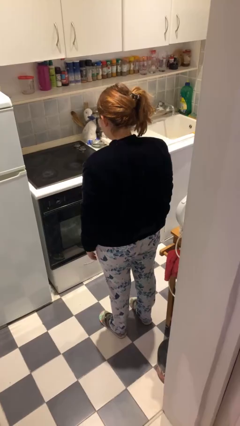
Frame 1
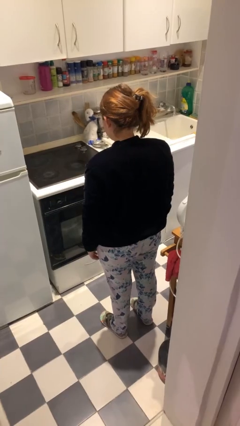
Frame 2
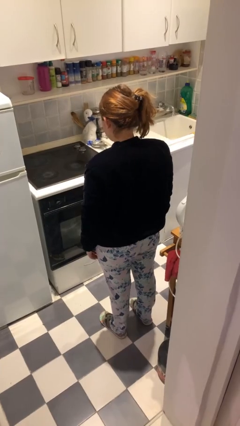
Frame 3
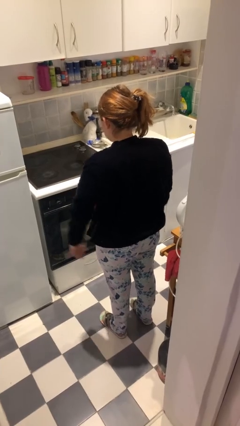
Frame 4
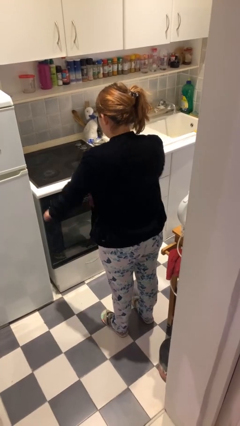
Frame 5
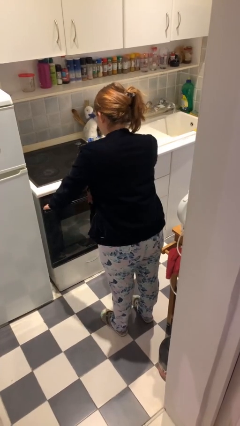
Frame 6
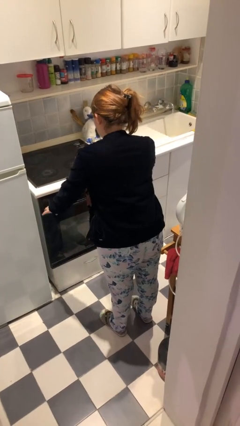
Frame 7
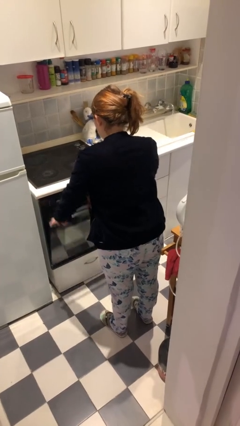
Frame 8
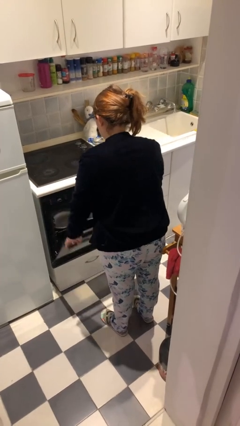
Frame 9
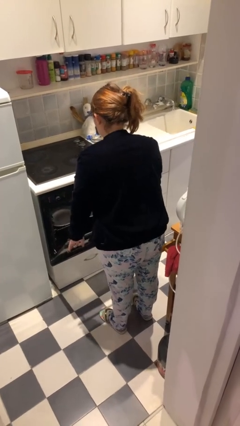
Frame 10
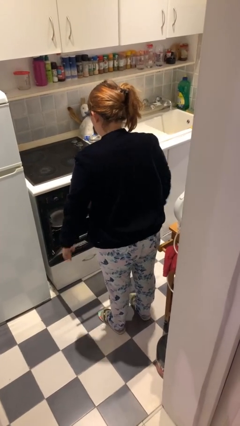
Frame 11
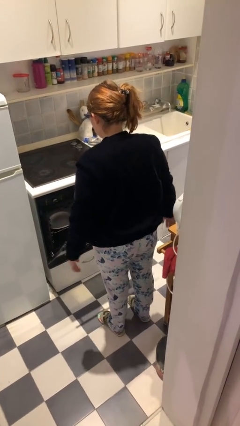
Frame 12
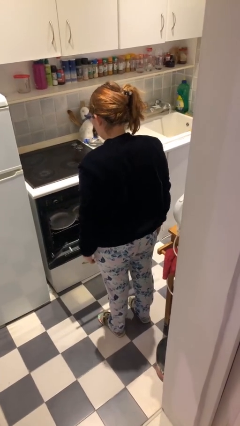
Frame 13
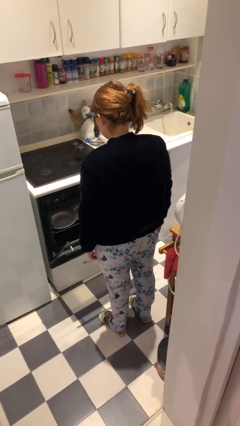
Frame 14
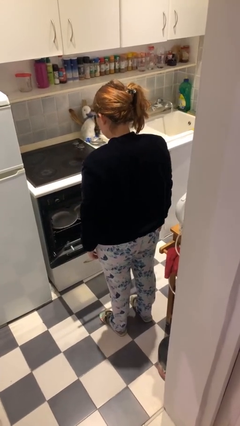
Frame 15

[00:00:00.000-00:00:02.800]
person opens dishwasher

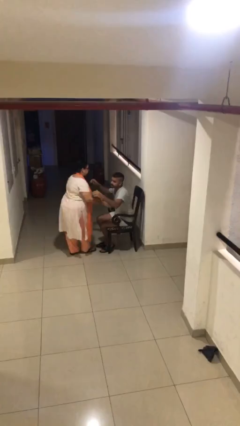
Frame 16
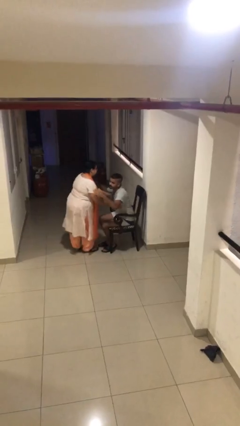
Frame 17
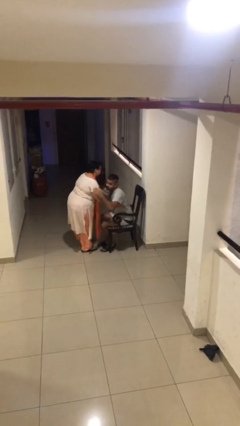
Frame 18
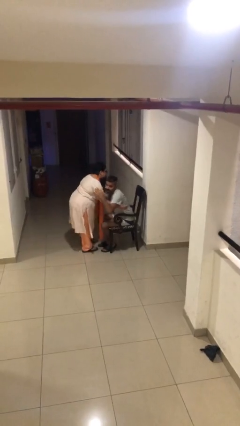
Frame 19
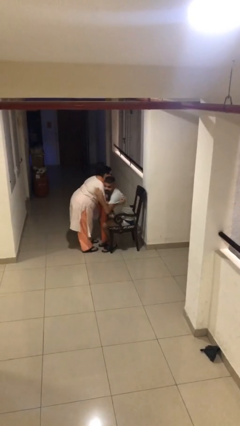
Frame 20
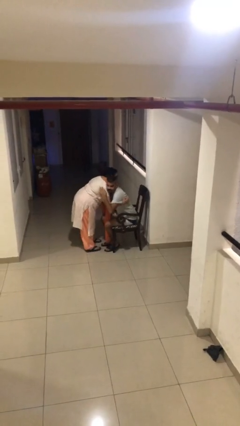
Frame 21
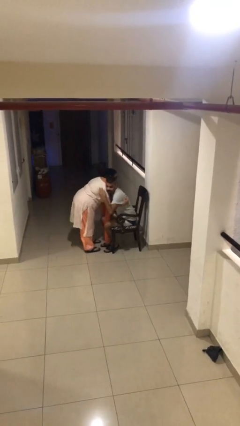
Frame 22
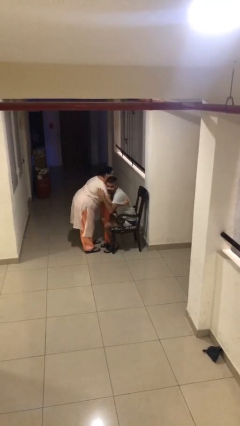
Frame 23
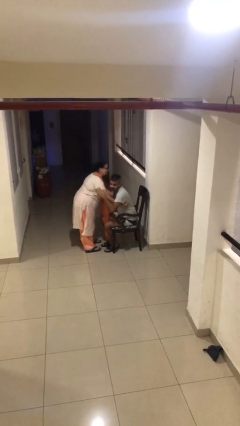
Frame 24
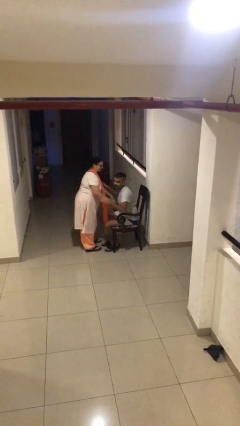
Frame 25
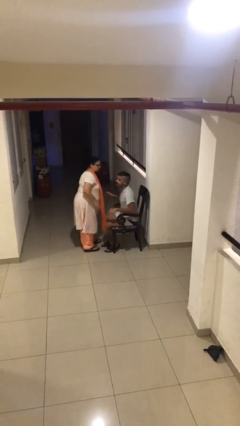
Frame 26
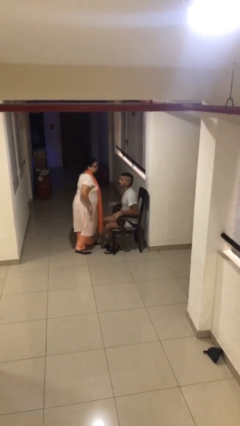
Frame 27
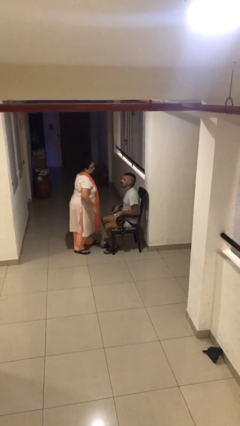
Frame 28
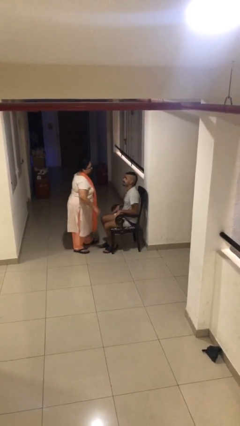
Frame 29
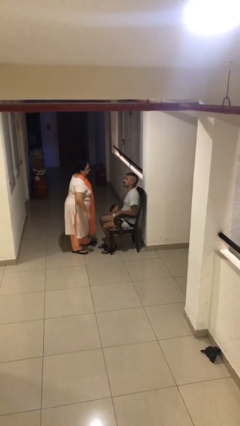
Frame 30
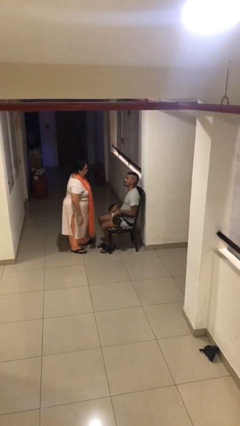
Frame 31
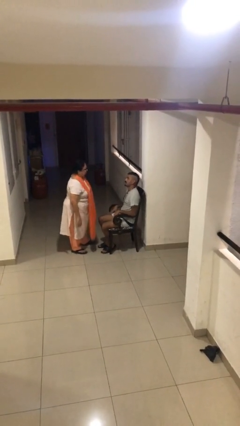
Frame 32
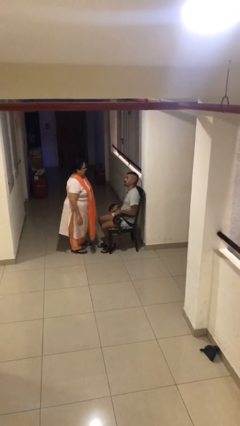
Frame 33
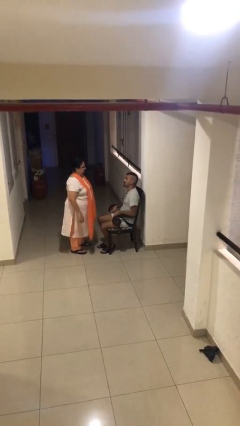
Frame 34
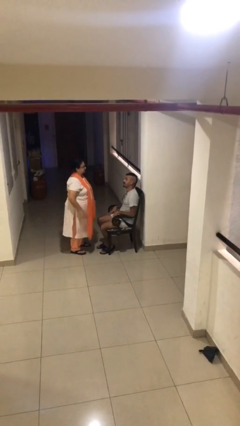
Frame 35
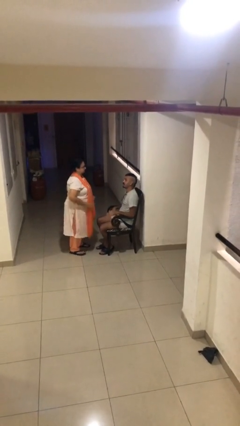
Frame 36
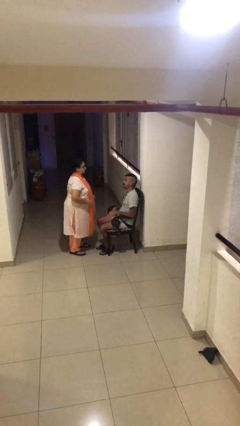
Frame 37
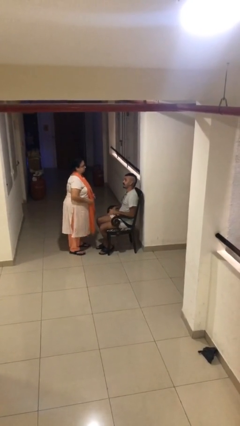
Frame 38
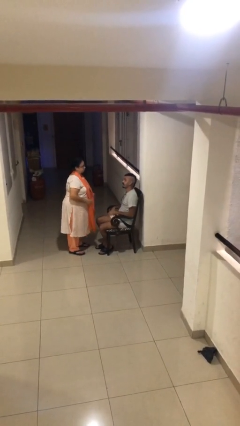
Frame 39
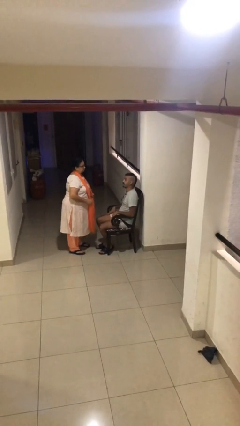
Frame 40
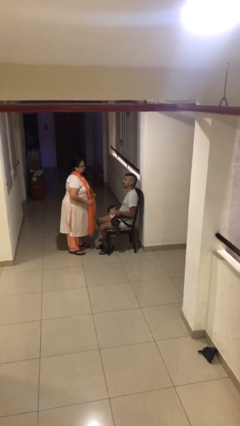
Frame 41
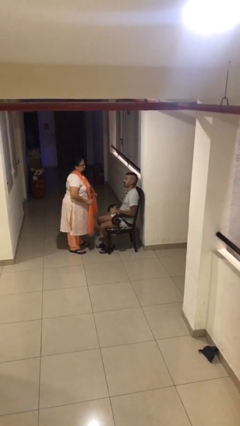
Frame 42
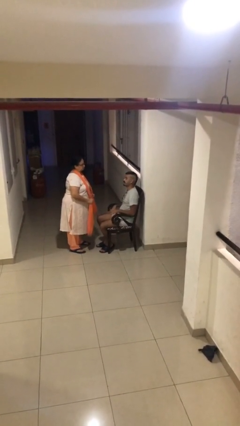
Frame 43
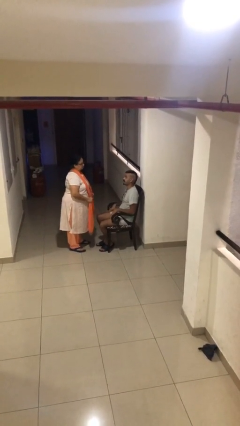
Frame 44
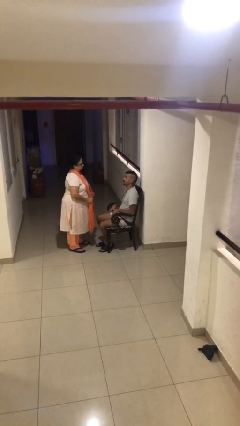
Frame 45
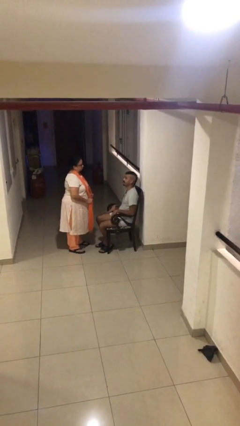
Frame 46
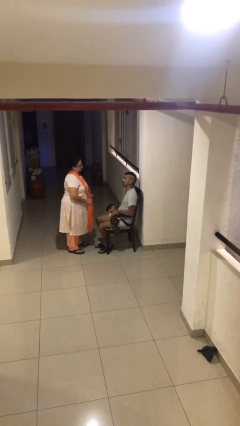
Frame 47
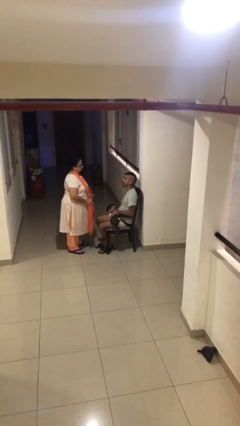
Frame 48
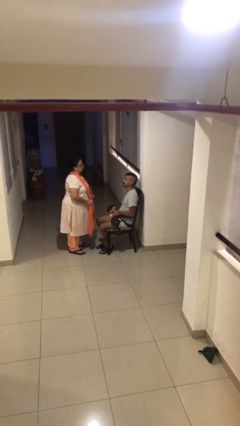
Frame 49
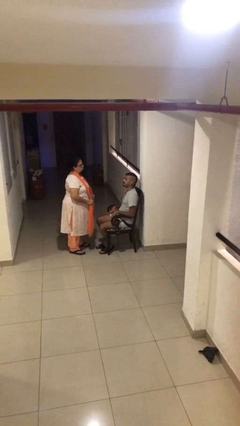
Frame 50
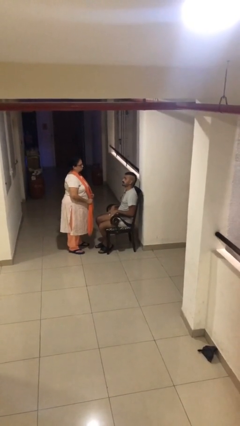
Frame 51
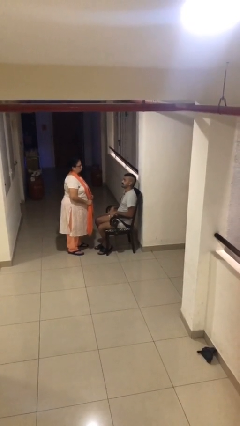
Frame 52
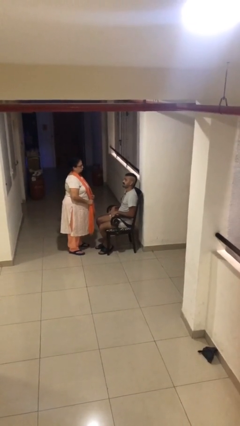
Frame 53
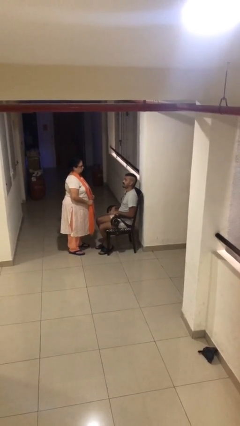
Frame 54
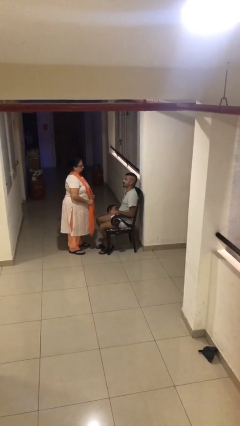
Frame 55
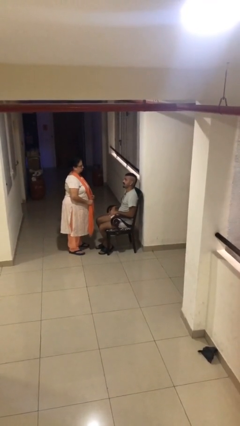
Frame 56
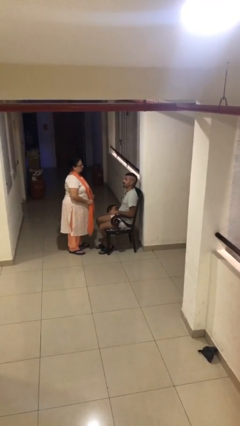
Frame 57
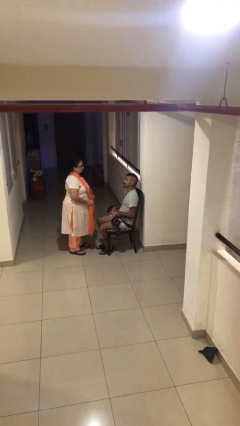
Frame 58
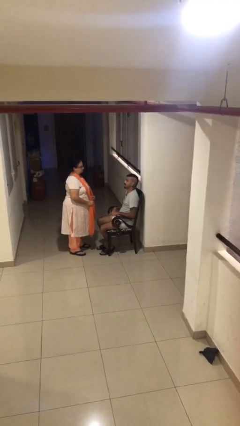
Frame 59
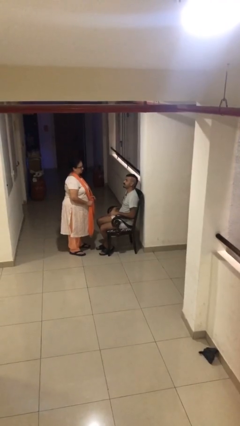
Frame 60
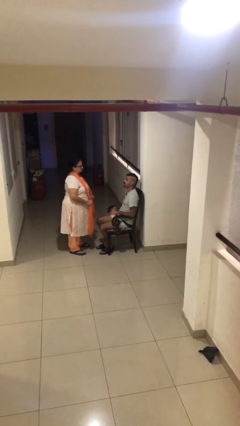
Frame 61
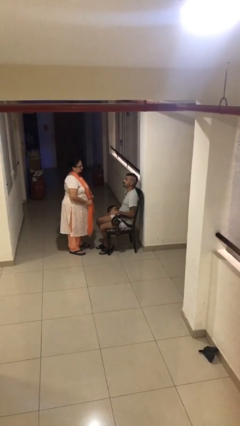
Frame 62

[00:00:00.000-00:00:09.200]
person embraces person

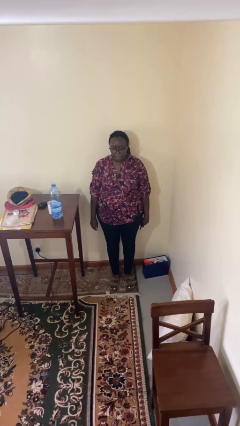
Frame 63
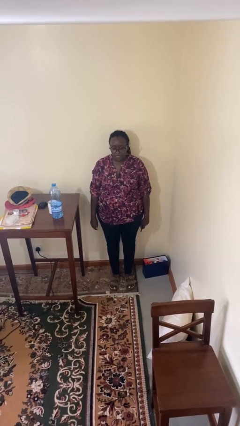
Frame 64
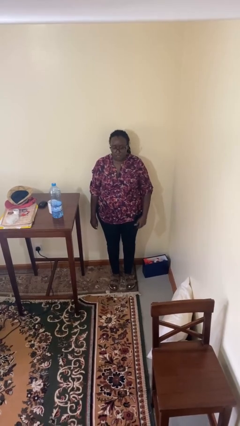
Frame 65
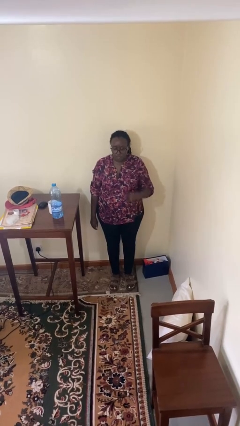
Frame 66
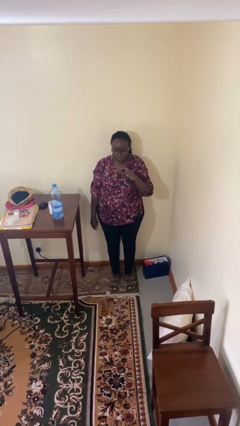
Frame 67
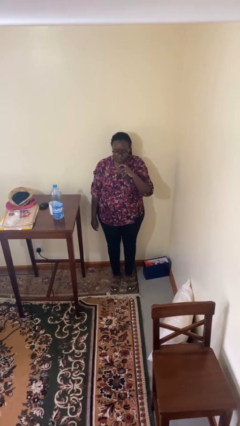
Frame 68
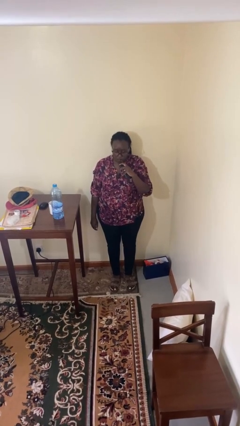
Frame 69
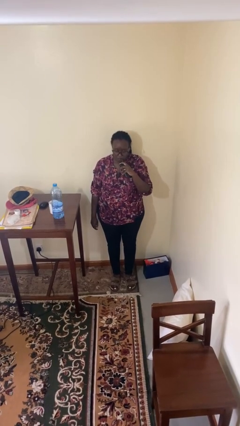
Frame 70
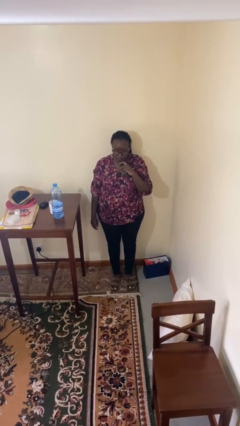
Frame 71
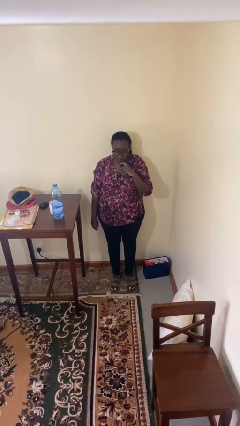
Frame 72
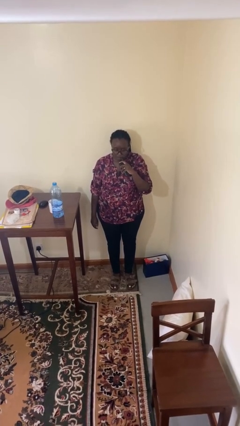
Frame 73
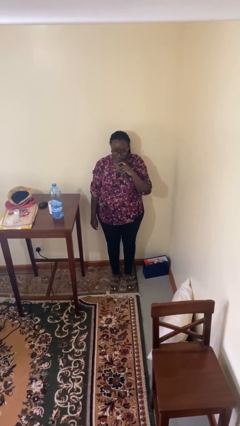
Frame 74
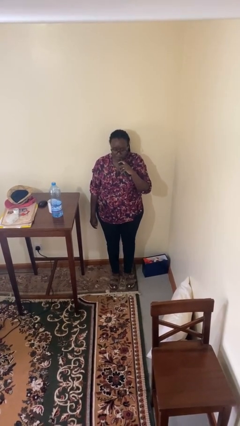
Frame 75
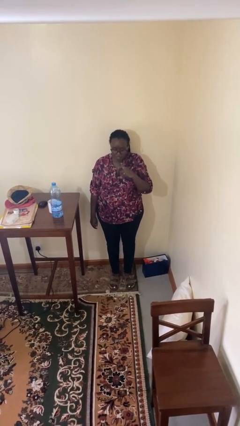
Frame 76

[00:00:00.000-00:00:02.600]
person vapes

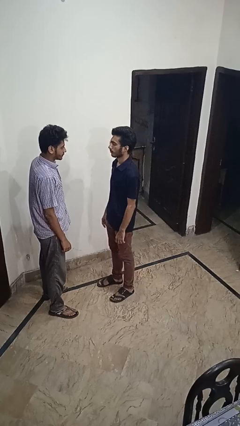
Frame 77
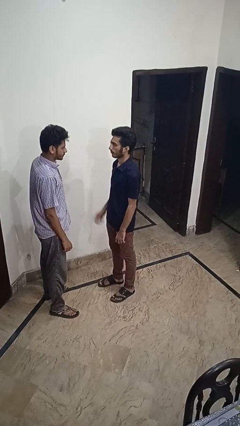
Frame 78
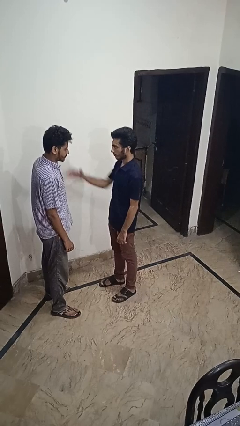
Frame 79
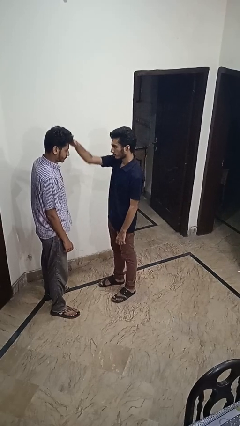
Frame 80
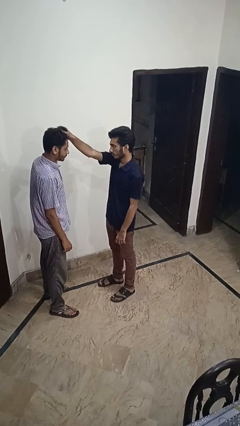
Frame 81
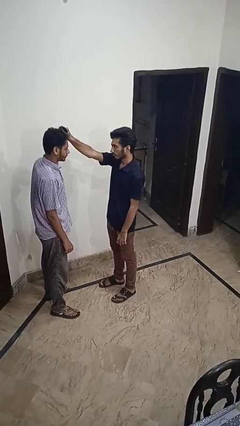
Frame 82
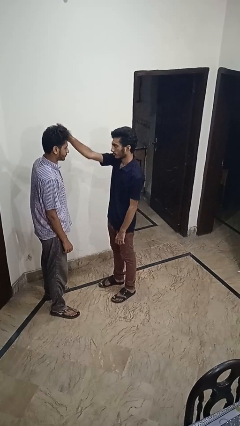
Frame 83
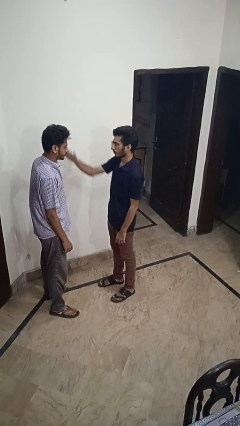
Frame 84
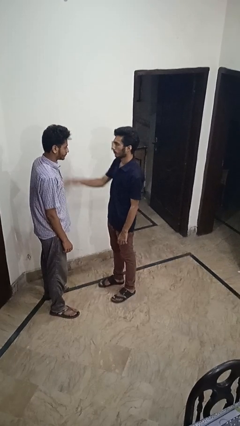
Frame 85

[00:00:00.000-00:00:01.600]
person grabs person by hair

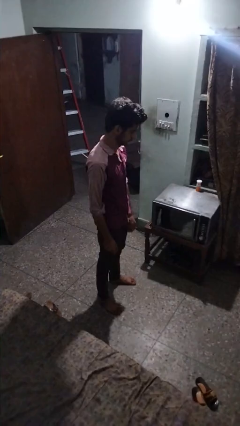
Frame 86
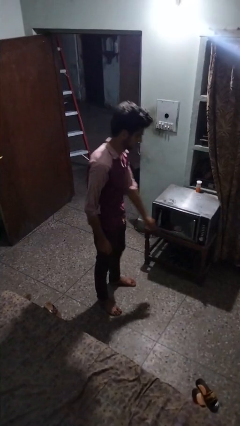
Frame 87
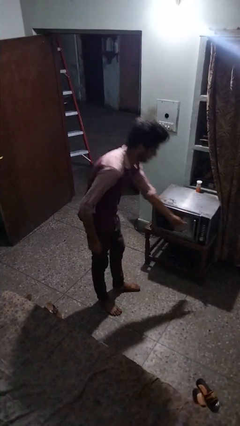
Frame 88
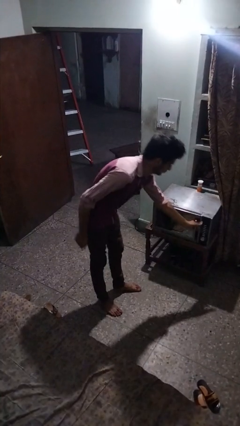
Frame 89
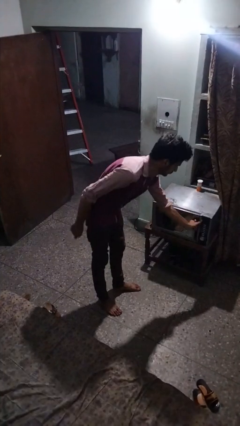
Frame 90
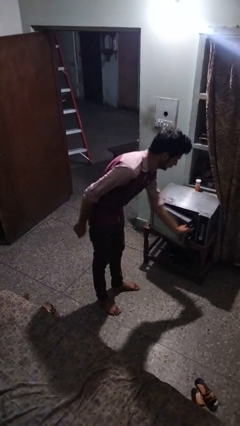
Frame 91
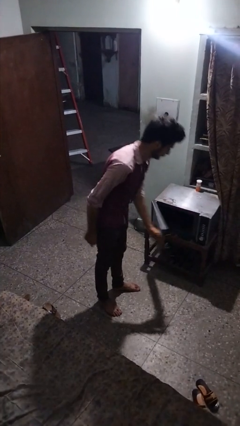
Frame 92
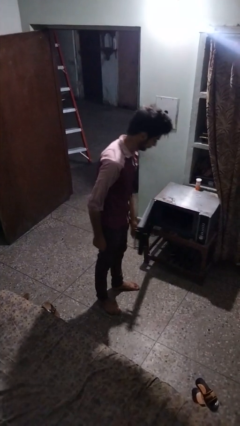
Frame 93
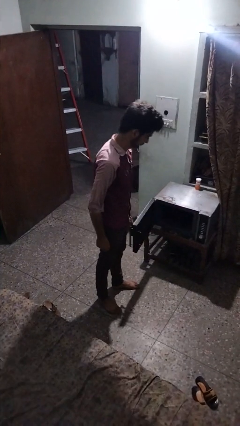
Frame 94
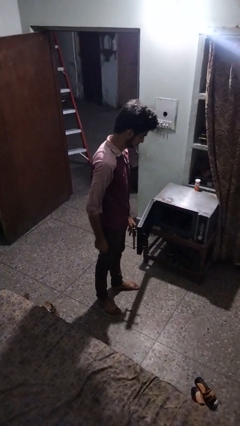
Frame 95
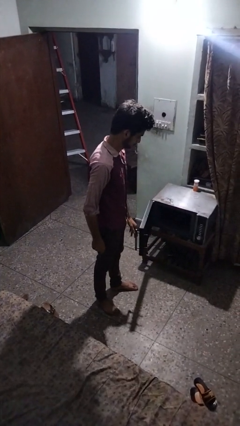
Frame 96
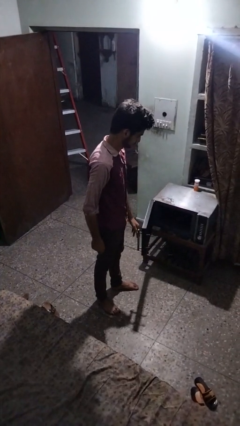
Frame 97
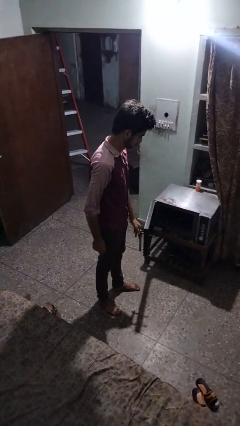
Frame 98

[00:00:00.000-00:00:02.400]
person opens microwave
